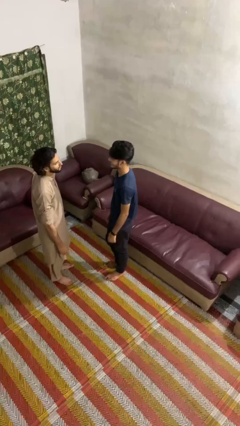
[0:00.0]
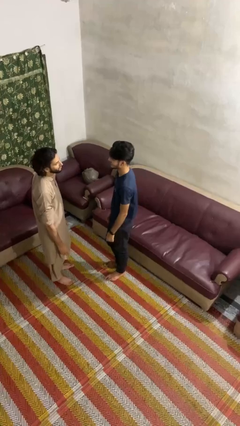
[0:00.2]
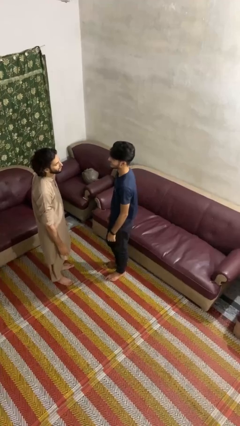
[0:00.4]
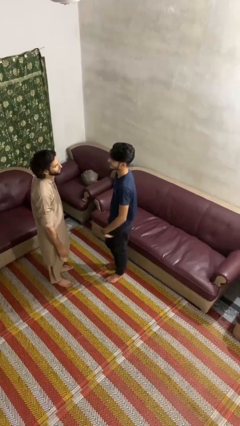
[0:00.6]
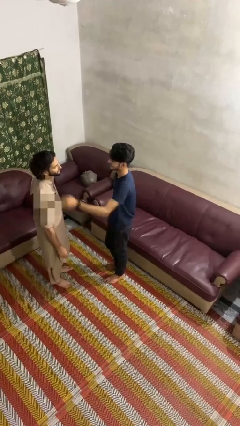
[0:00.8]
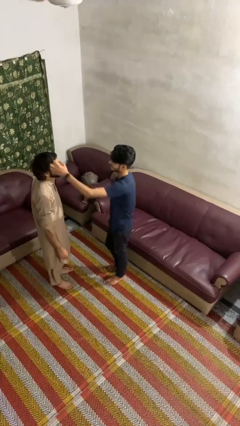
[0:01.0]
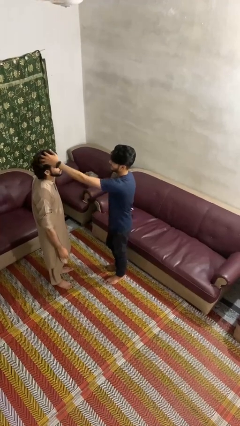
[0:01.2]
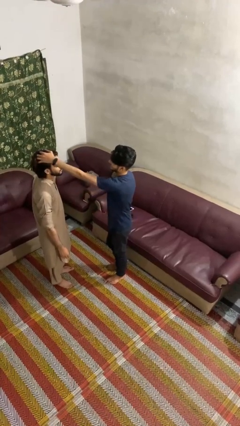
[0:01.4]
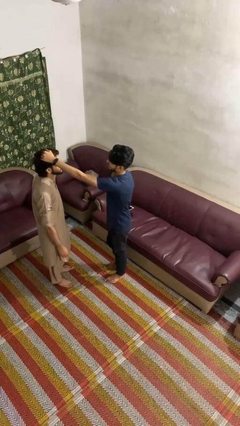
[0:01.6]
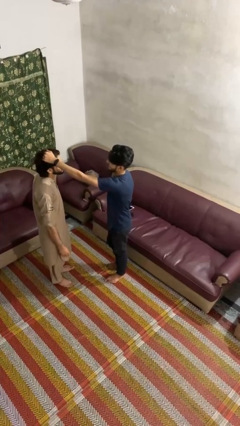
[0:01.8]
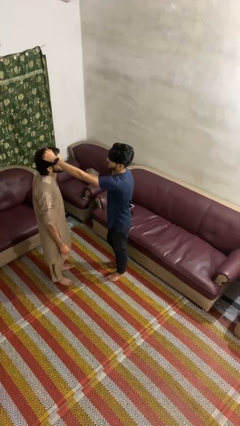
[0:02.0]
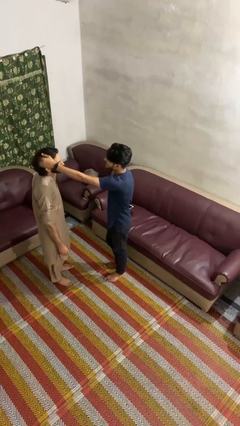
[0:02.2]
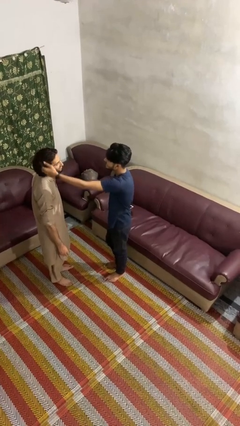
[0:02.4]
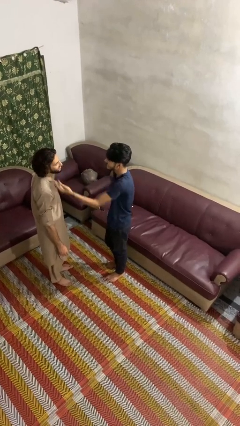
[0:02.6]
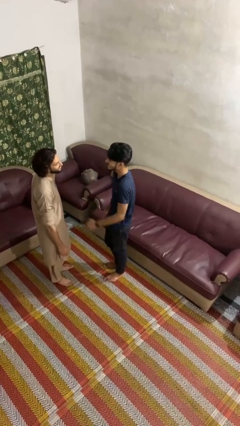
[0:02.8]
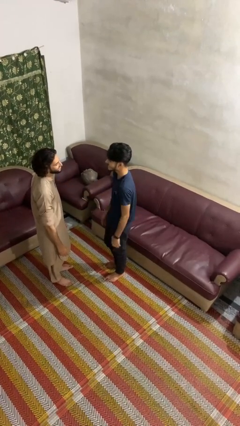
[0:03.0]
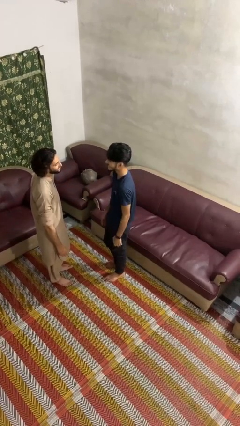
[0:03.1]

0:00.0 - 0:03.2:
person grabs person by hair

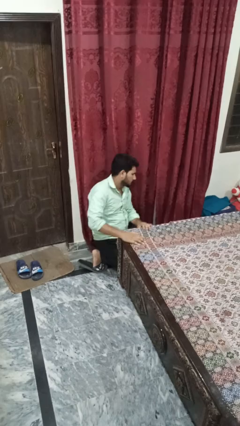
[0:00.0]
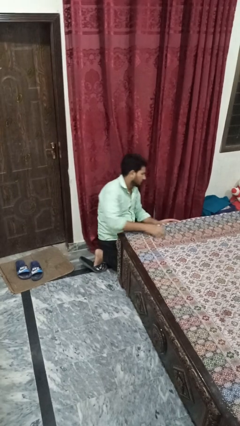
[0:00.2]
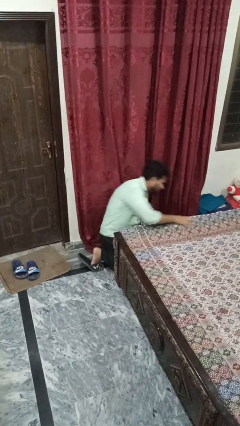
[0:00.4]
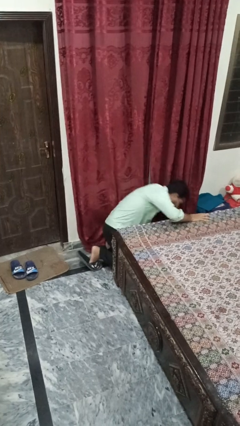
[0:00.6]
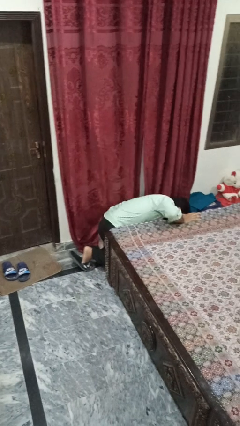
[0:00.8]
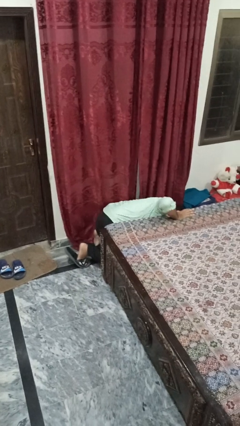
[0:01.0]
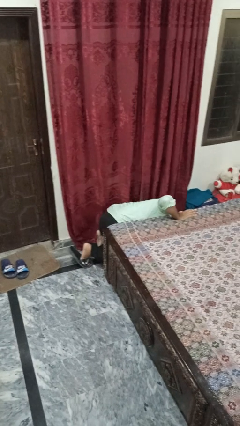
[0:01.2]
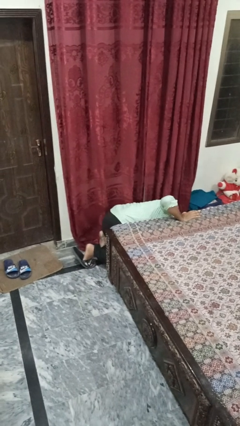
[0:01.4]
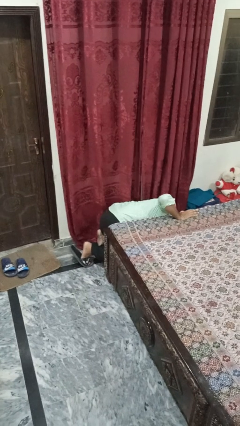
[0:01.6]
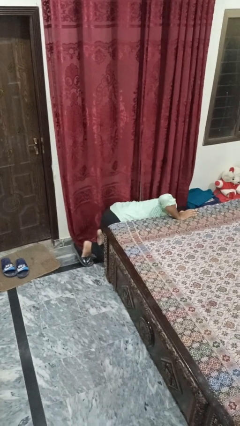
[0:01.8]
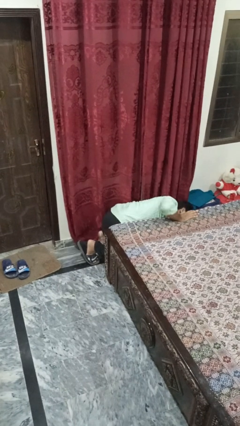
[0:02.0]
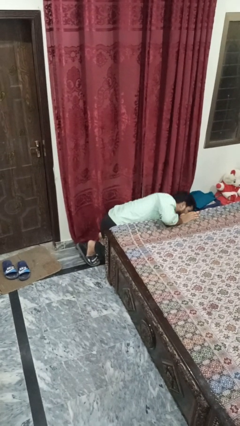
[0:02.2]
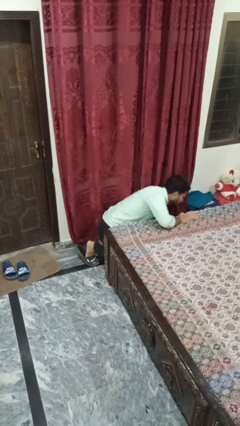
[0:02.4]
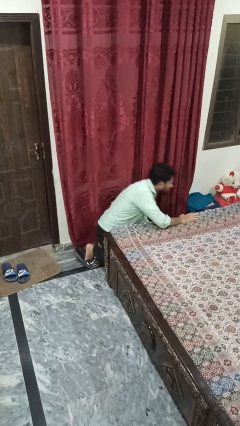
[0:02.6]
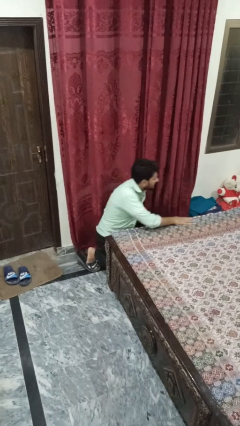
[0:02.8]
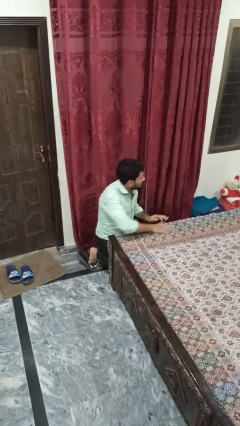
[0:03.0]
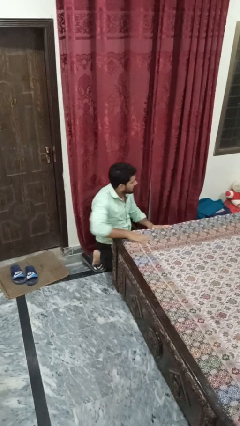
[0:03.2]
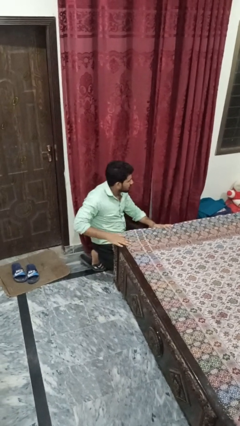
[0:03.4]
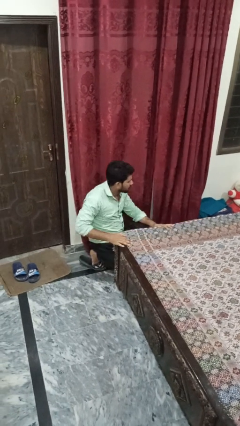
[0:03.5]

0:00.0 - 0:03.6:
person searches under bed

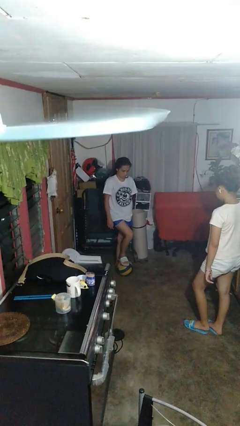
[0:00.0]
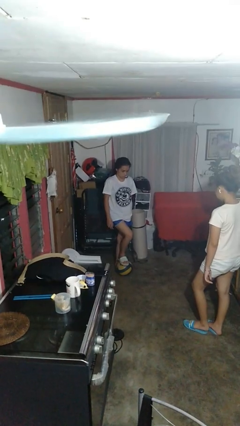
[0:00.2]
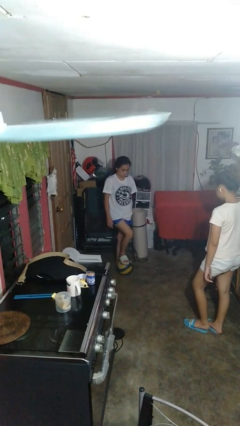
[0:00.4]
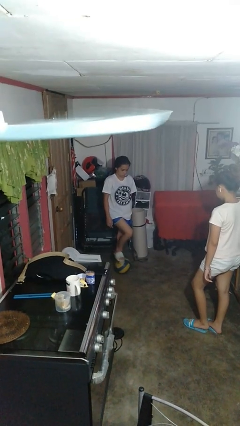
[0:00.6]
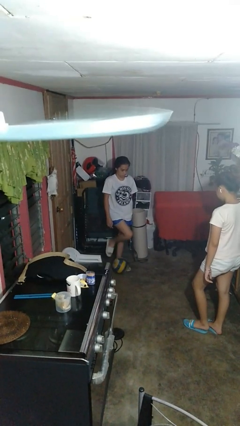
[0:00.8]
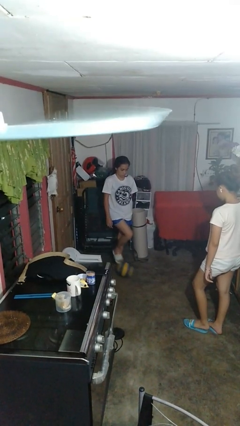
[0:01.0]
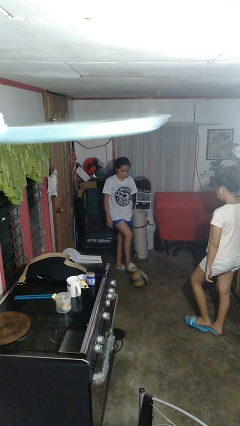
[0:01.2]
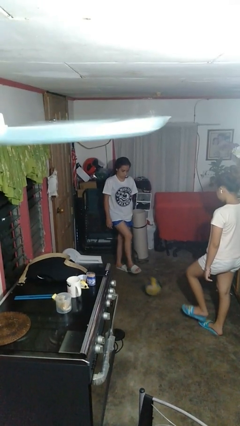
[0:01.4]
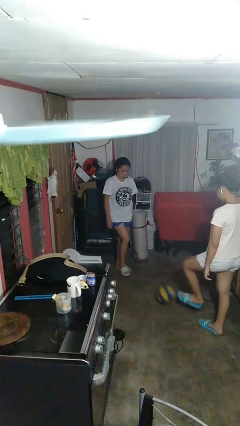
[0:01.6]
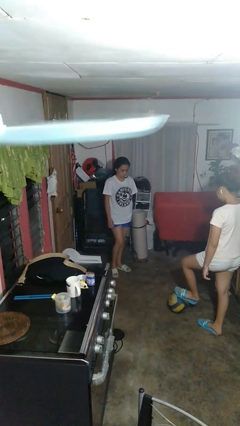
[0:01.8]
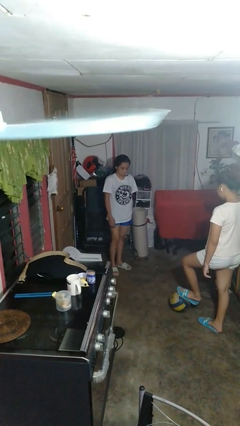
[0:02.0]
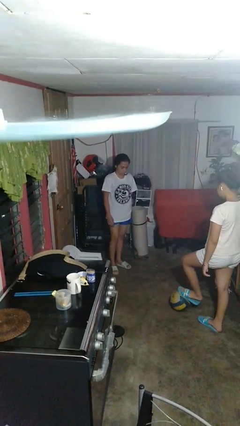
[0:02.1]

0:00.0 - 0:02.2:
person kicks object to person

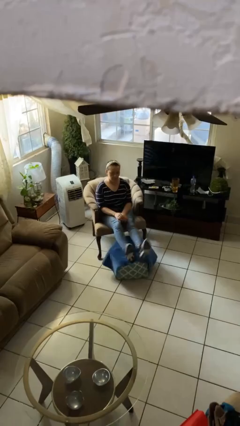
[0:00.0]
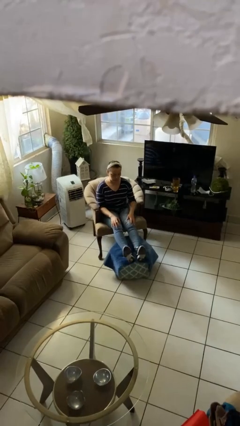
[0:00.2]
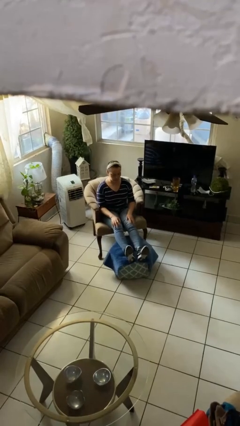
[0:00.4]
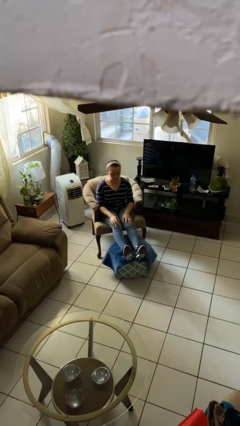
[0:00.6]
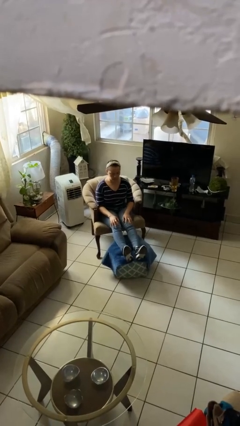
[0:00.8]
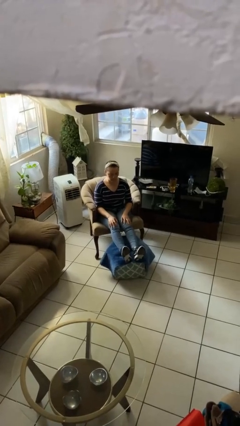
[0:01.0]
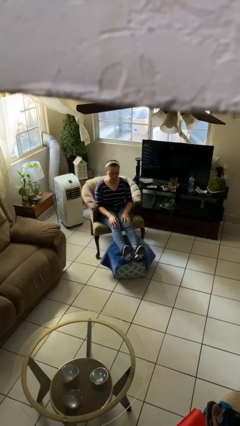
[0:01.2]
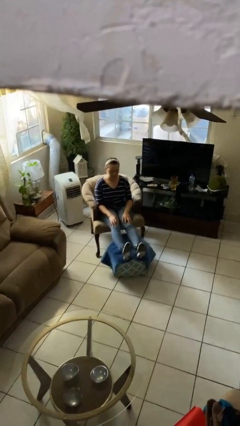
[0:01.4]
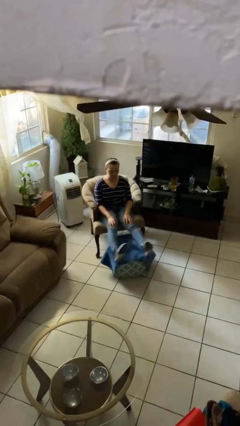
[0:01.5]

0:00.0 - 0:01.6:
person puts feet up

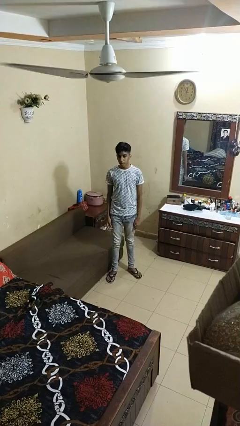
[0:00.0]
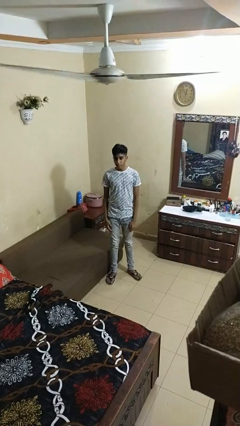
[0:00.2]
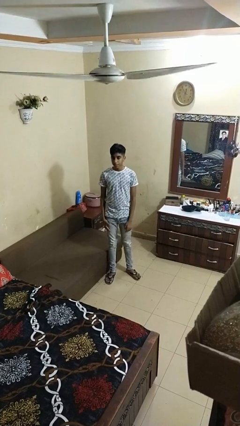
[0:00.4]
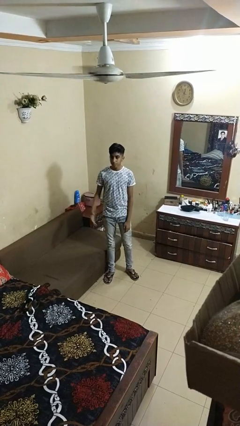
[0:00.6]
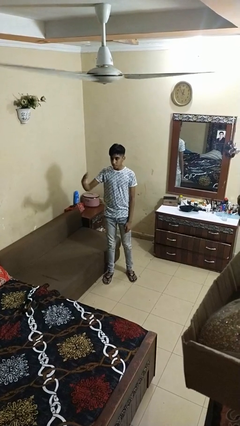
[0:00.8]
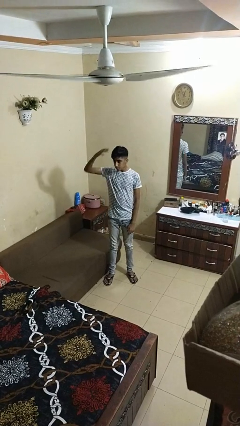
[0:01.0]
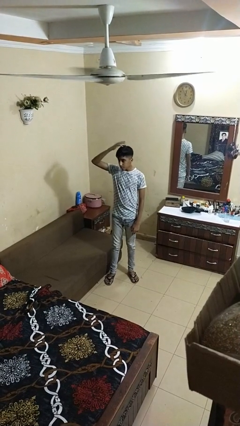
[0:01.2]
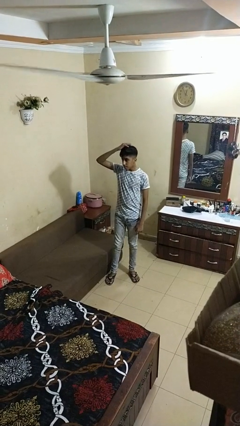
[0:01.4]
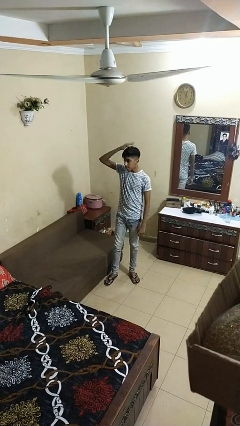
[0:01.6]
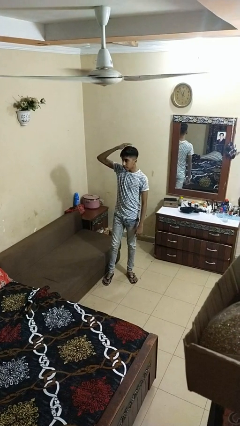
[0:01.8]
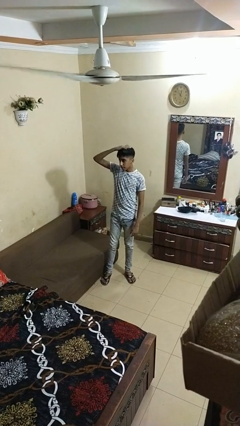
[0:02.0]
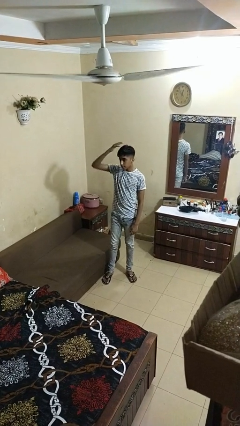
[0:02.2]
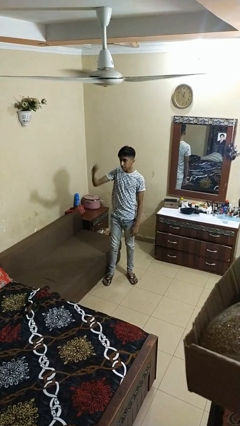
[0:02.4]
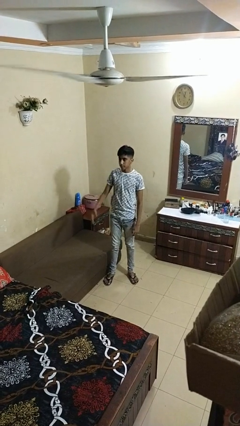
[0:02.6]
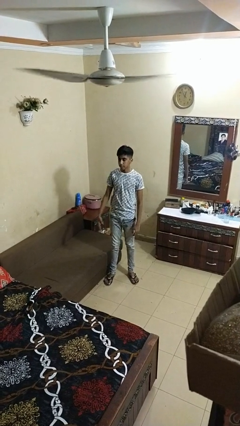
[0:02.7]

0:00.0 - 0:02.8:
person pats head

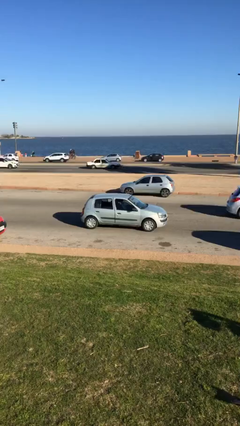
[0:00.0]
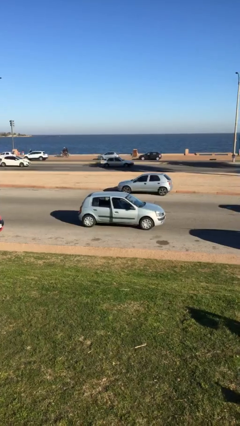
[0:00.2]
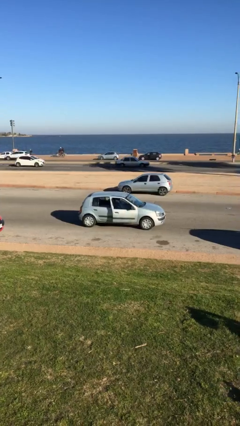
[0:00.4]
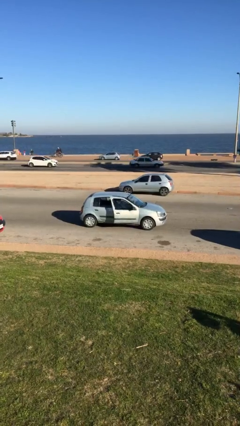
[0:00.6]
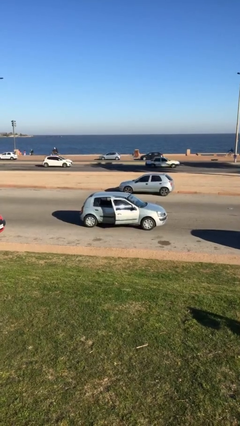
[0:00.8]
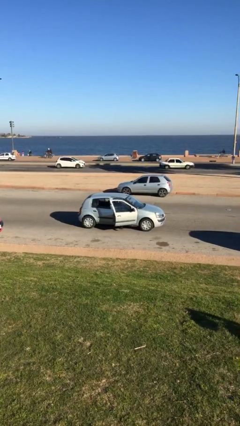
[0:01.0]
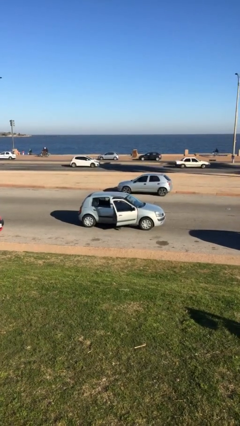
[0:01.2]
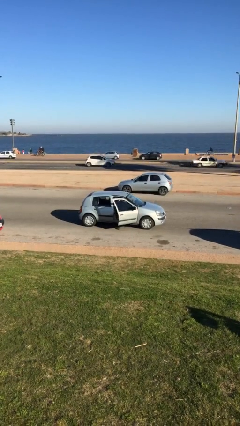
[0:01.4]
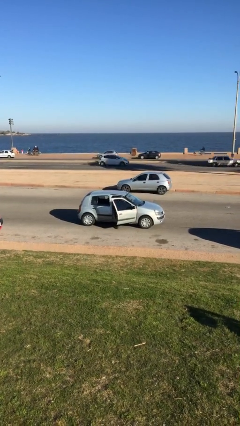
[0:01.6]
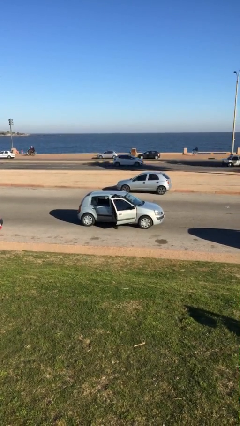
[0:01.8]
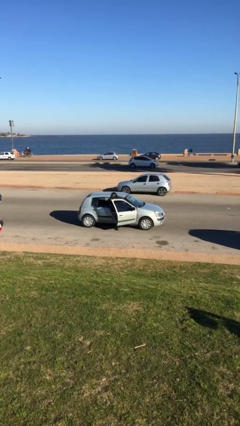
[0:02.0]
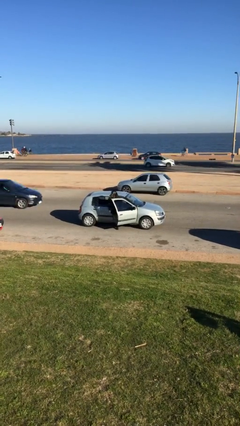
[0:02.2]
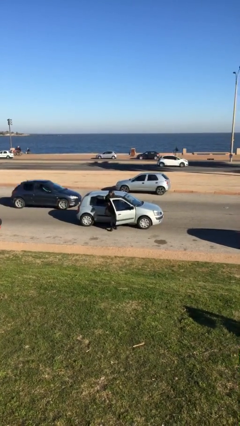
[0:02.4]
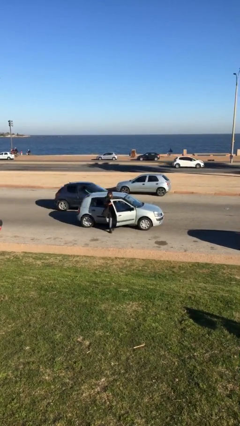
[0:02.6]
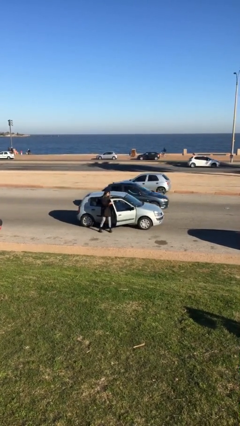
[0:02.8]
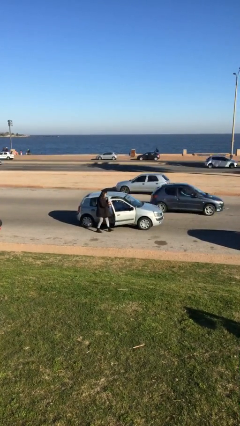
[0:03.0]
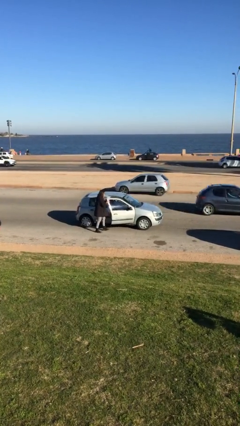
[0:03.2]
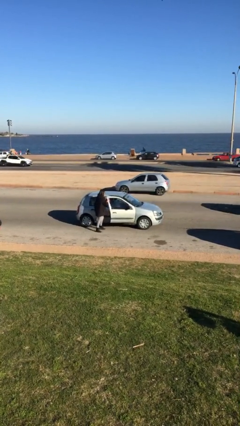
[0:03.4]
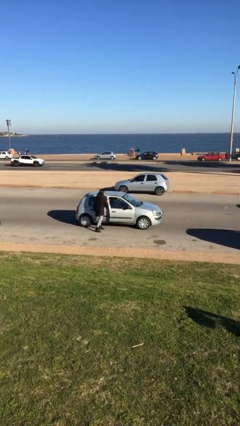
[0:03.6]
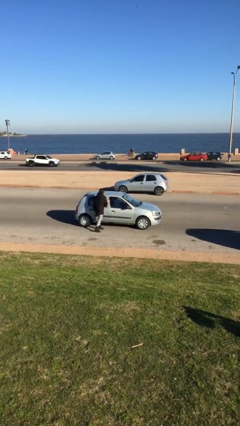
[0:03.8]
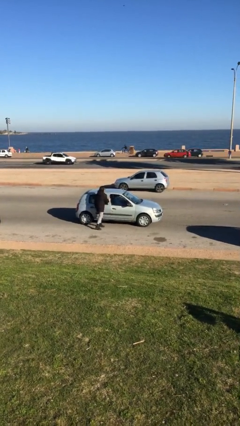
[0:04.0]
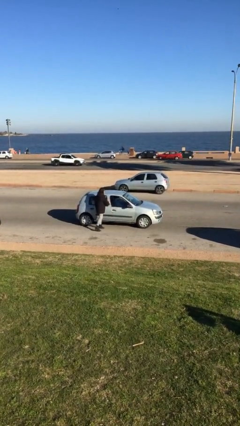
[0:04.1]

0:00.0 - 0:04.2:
car drops off person

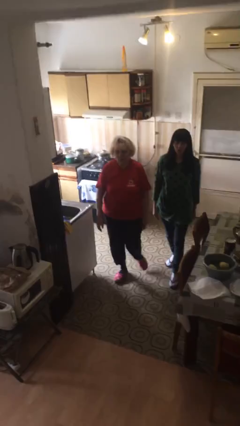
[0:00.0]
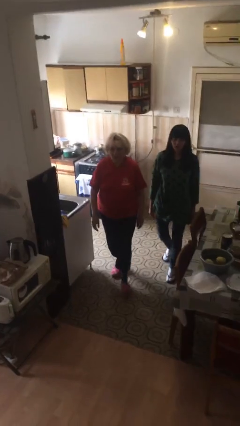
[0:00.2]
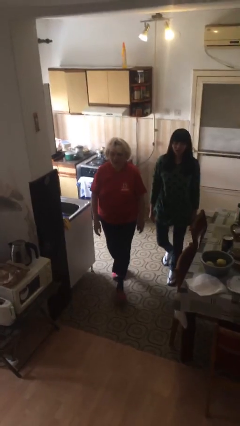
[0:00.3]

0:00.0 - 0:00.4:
person talks to person
